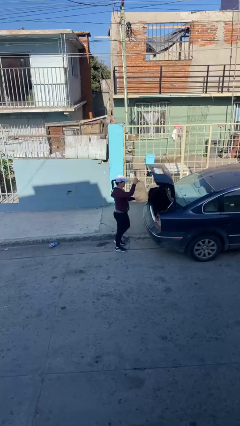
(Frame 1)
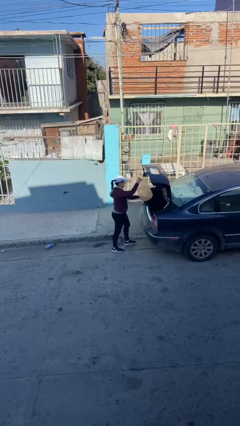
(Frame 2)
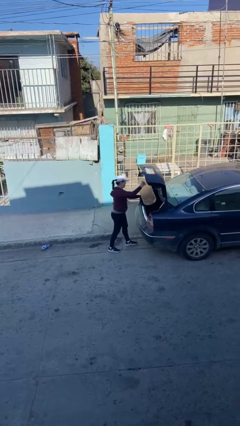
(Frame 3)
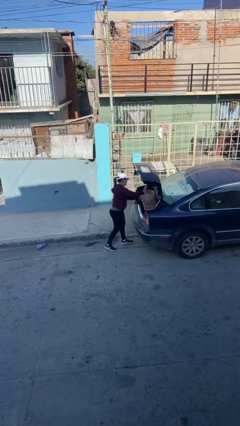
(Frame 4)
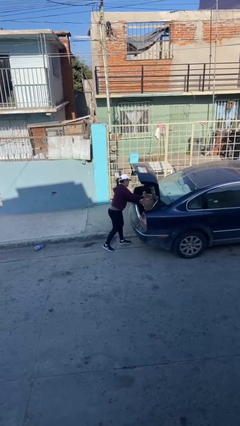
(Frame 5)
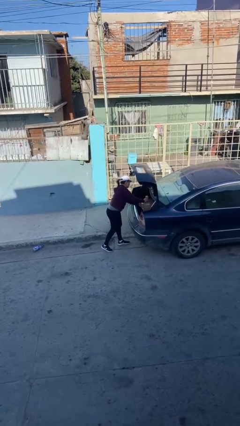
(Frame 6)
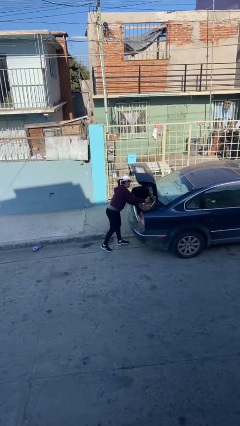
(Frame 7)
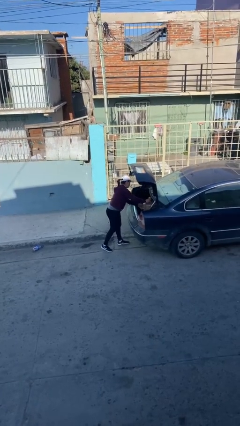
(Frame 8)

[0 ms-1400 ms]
person loads car

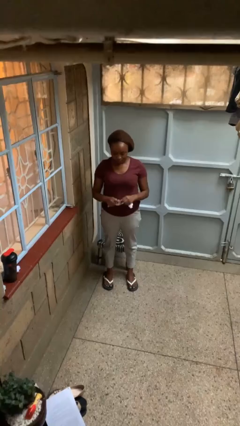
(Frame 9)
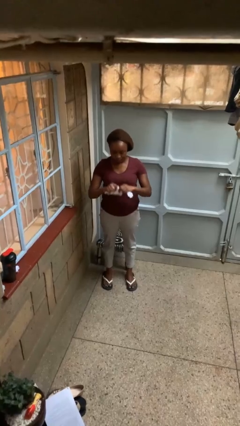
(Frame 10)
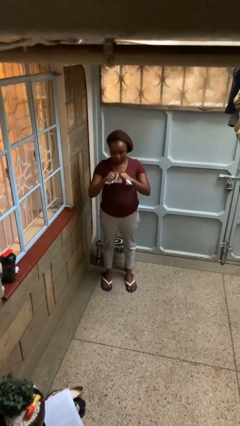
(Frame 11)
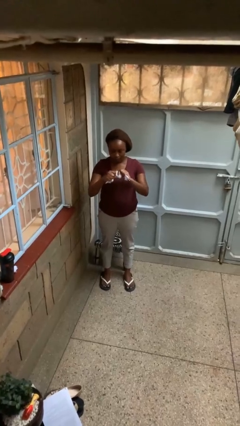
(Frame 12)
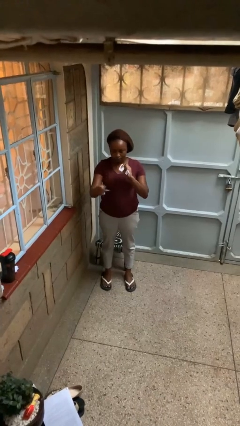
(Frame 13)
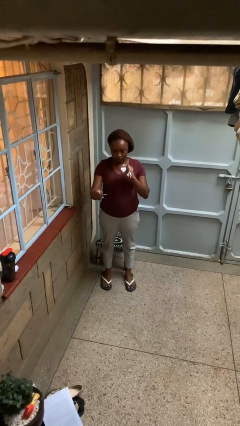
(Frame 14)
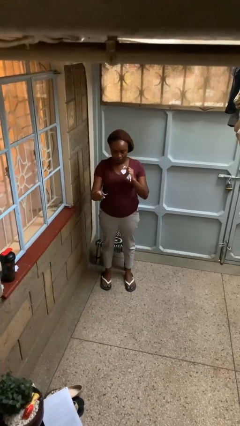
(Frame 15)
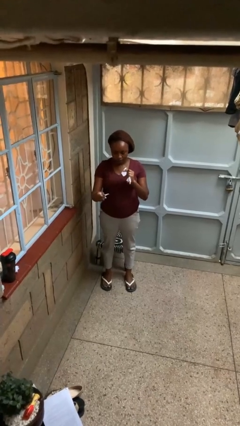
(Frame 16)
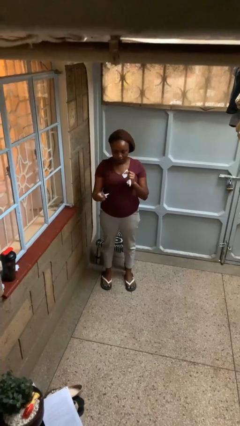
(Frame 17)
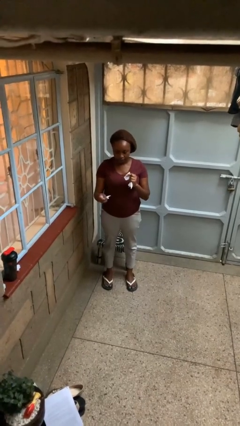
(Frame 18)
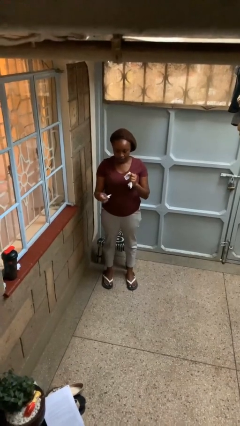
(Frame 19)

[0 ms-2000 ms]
person tears paper

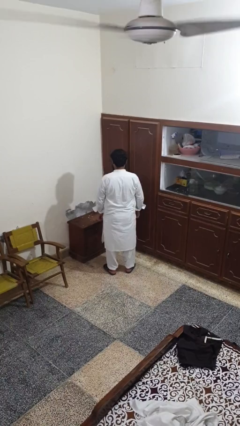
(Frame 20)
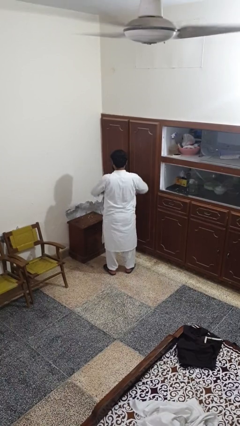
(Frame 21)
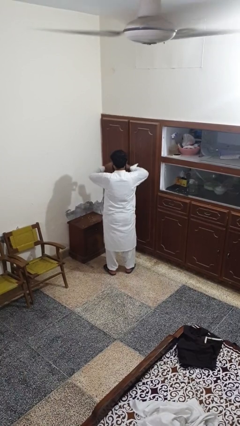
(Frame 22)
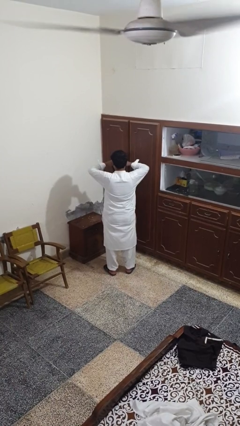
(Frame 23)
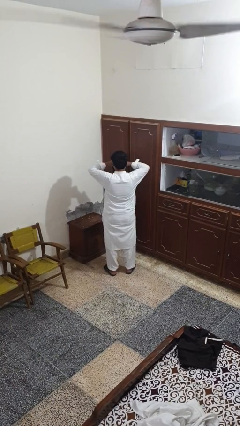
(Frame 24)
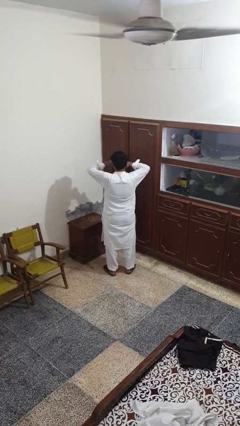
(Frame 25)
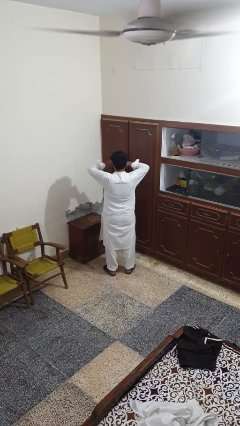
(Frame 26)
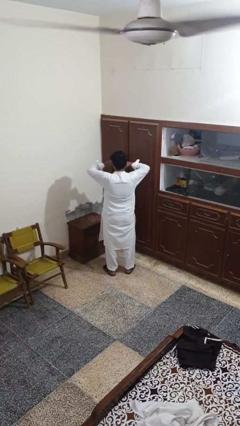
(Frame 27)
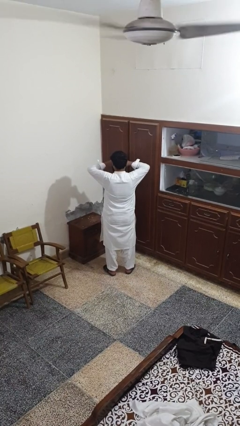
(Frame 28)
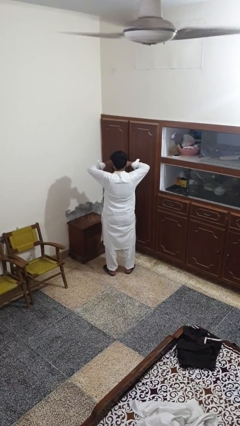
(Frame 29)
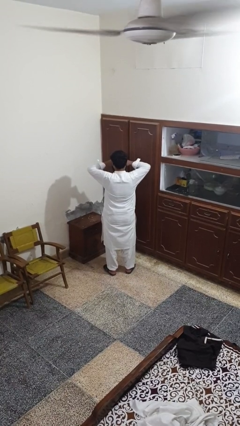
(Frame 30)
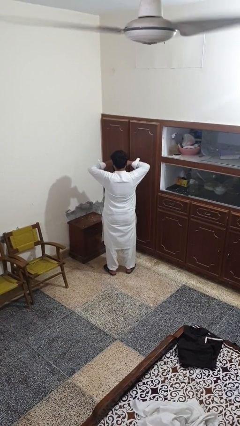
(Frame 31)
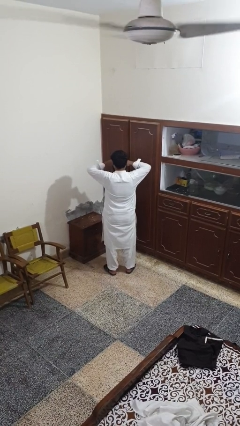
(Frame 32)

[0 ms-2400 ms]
person rubs eyes

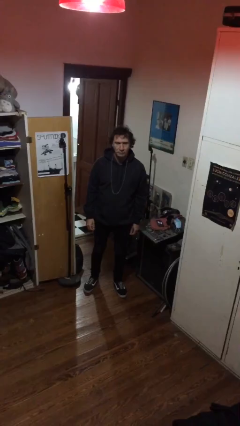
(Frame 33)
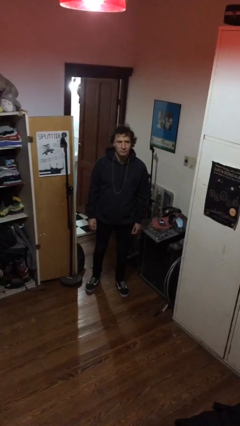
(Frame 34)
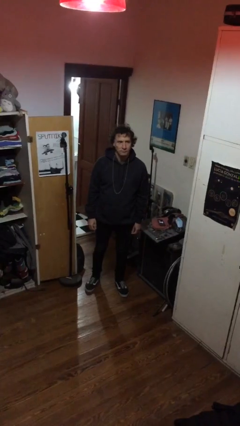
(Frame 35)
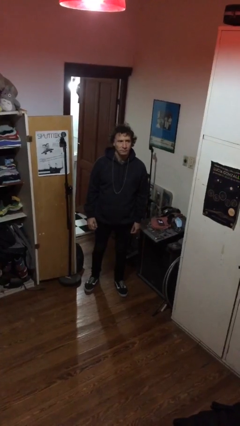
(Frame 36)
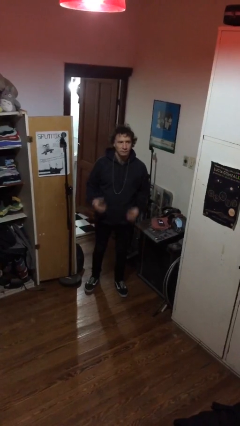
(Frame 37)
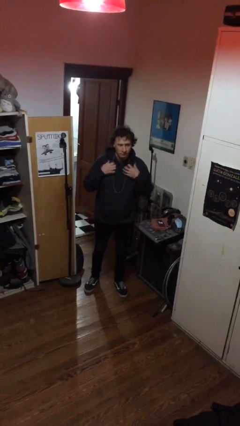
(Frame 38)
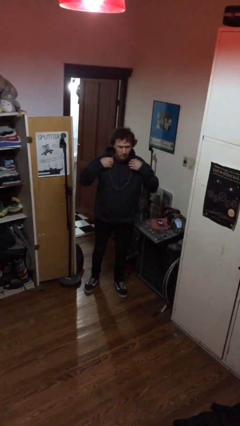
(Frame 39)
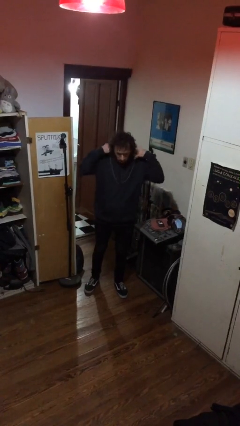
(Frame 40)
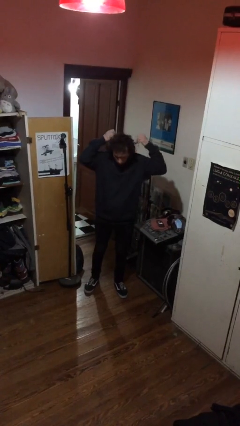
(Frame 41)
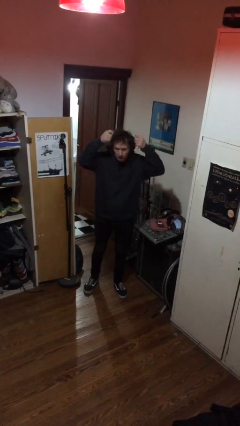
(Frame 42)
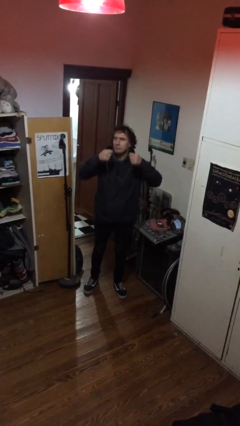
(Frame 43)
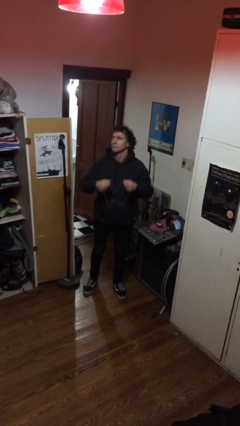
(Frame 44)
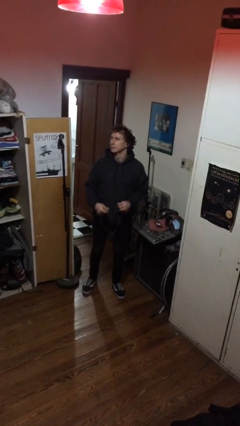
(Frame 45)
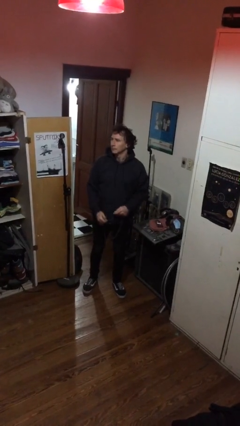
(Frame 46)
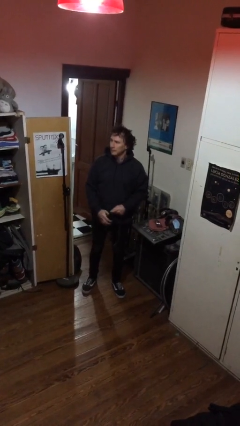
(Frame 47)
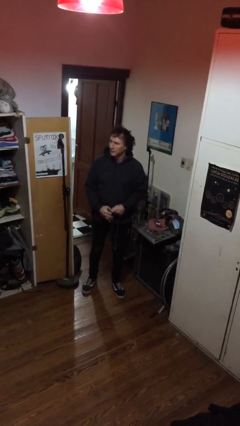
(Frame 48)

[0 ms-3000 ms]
person takes off necklace

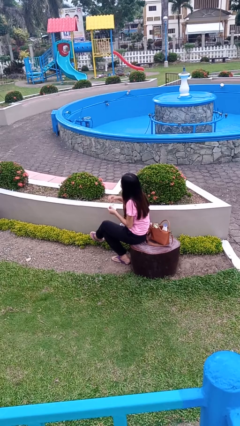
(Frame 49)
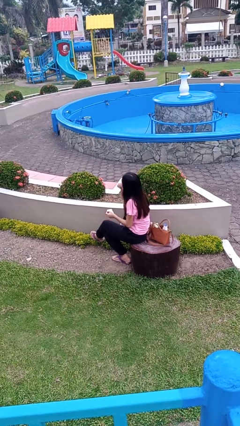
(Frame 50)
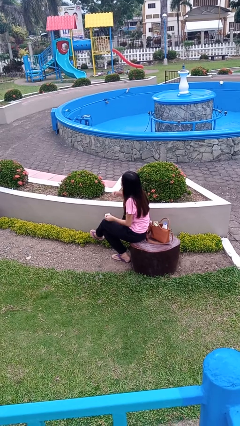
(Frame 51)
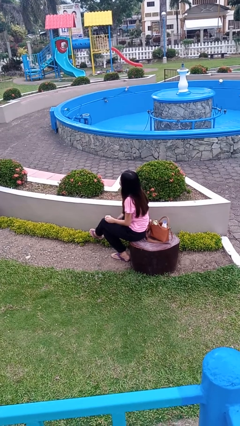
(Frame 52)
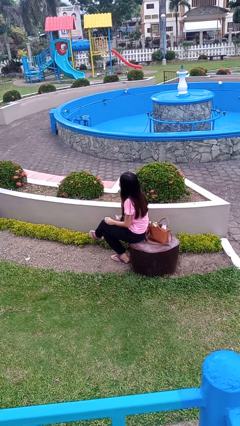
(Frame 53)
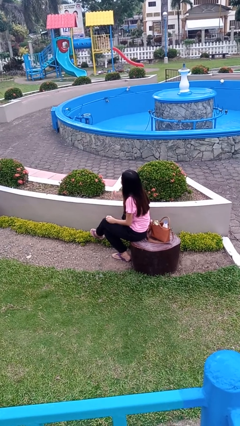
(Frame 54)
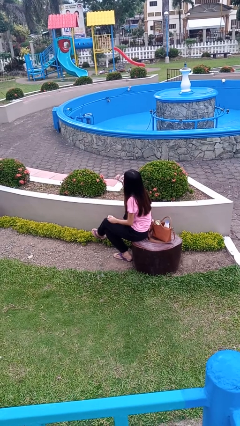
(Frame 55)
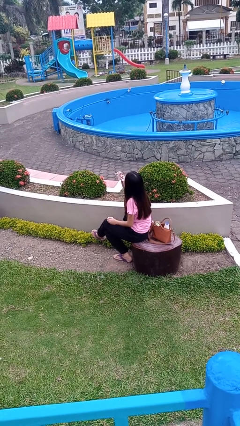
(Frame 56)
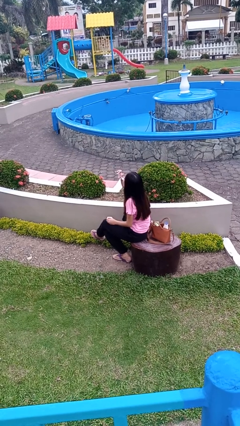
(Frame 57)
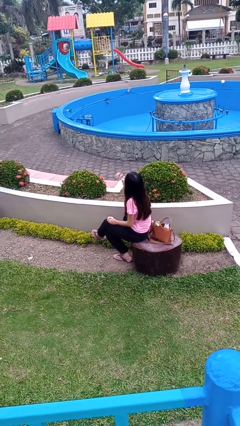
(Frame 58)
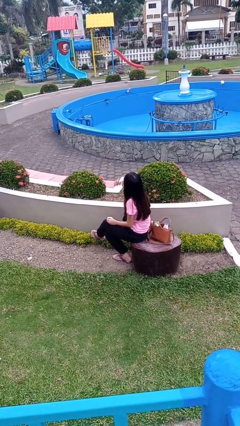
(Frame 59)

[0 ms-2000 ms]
person drinks from cup

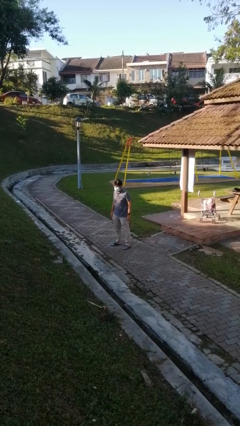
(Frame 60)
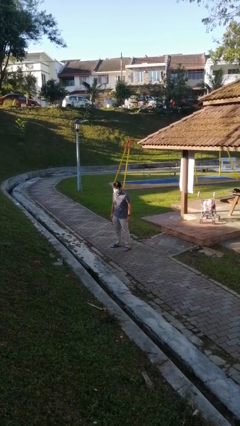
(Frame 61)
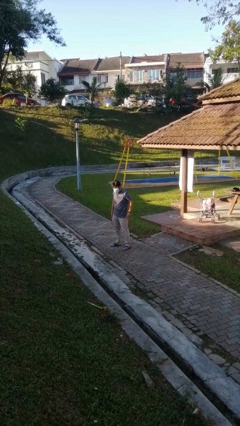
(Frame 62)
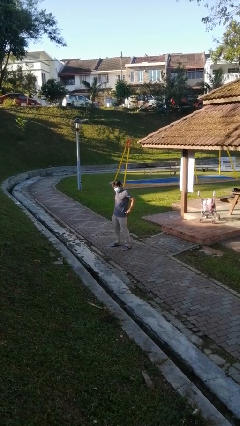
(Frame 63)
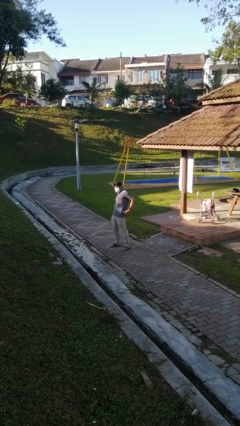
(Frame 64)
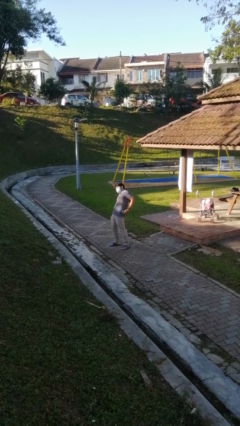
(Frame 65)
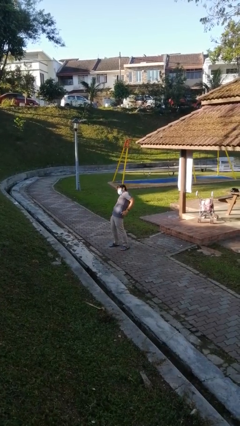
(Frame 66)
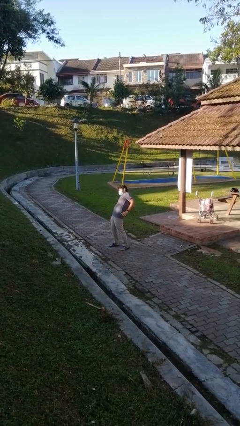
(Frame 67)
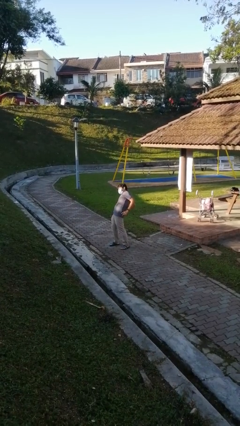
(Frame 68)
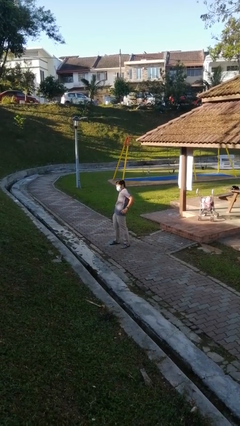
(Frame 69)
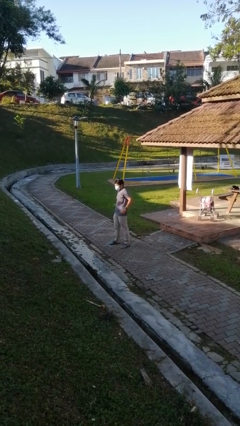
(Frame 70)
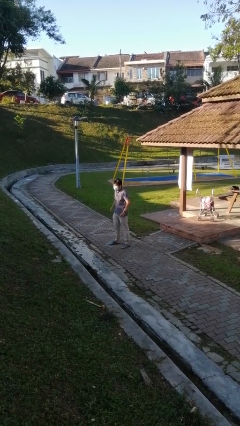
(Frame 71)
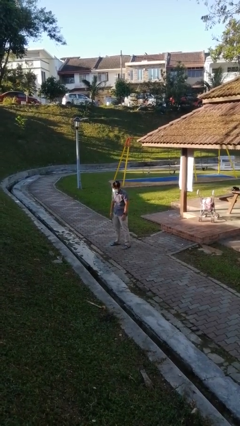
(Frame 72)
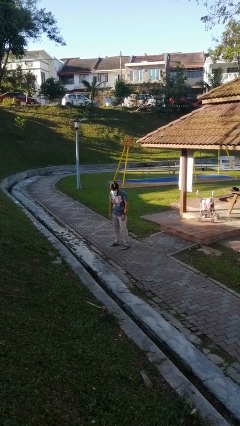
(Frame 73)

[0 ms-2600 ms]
person stretches back

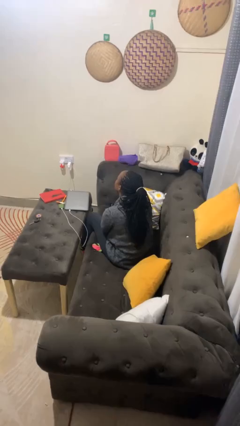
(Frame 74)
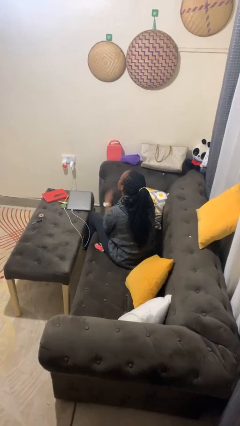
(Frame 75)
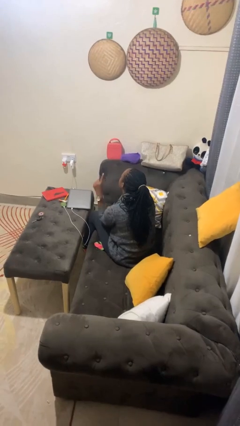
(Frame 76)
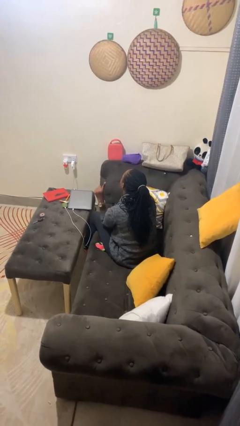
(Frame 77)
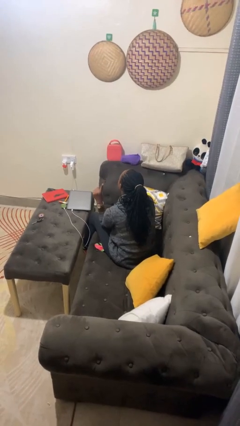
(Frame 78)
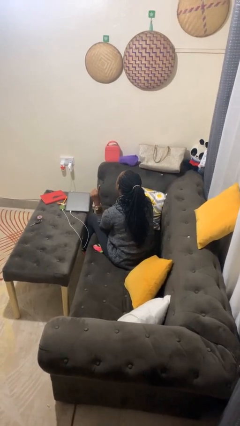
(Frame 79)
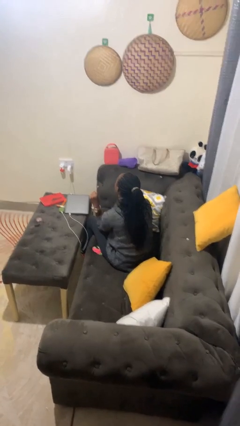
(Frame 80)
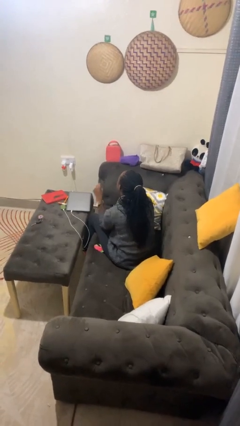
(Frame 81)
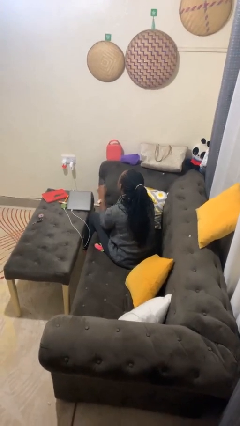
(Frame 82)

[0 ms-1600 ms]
person gestures number one

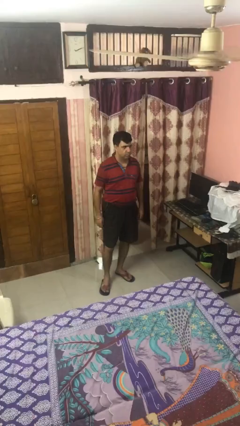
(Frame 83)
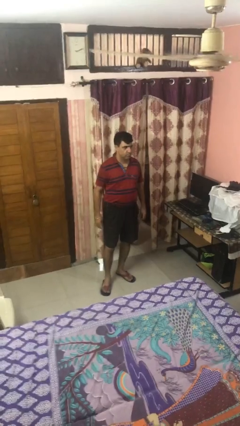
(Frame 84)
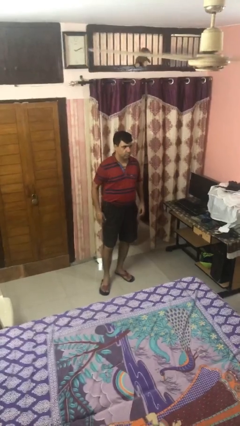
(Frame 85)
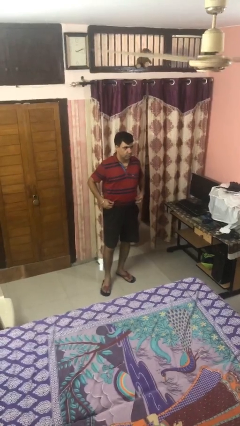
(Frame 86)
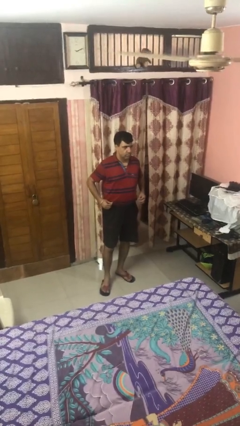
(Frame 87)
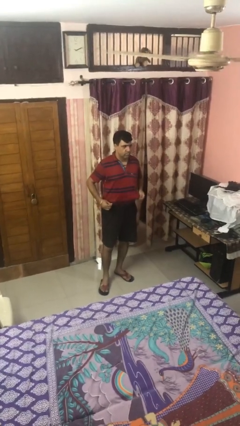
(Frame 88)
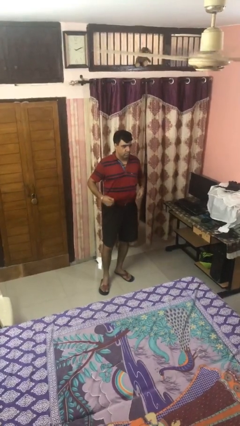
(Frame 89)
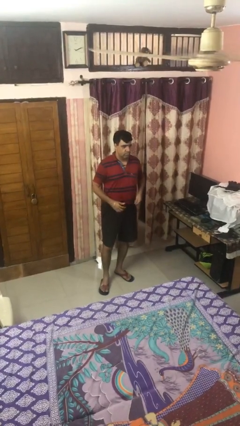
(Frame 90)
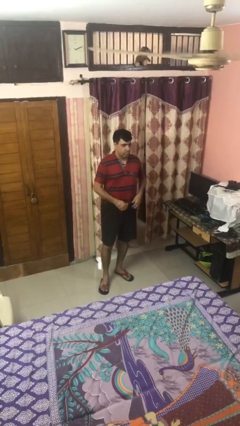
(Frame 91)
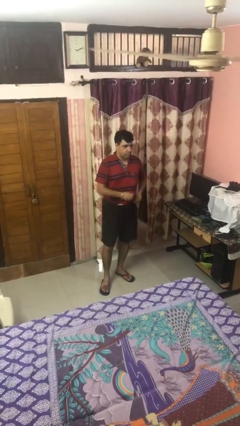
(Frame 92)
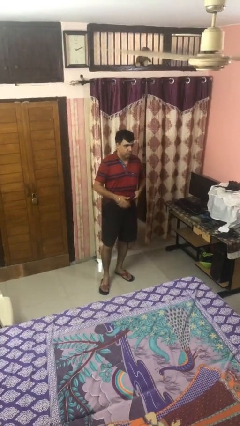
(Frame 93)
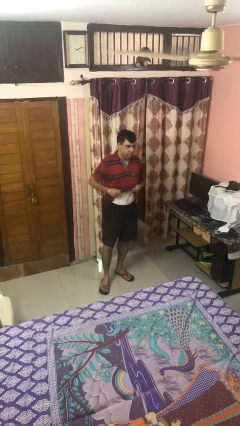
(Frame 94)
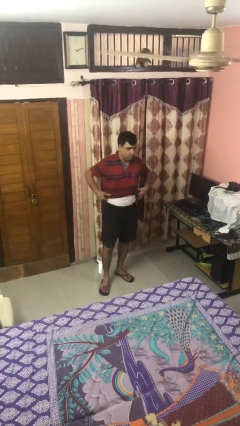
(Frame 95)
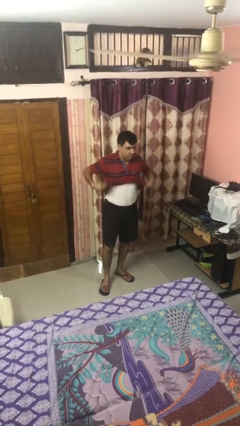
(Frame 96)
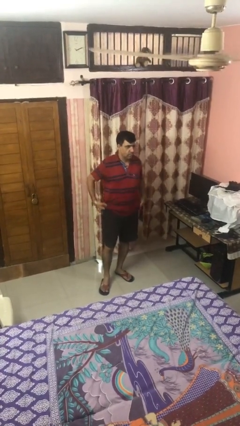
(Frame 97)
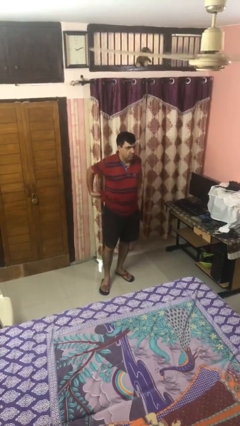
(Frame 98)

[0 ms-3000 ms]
person untucks shirt
